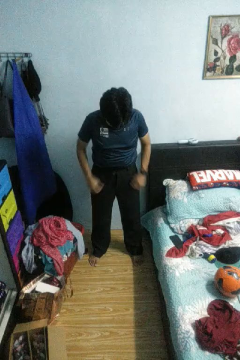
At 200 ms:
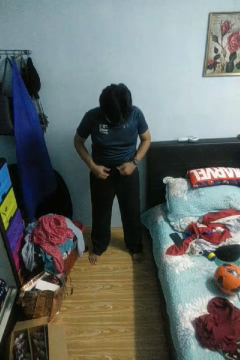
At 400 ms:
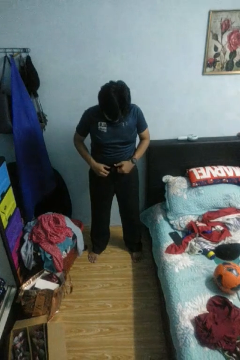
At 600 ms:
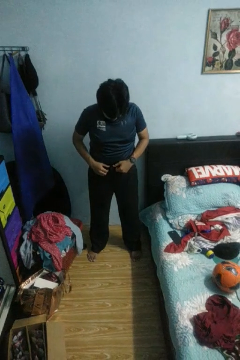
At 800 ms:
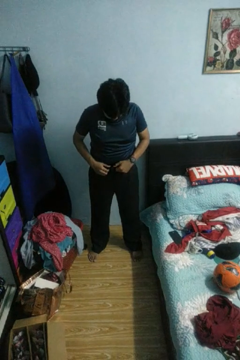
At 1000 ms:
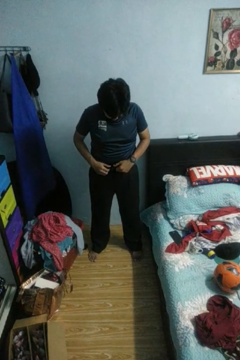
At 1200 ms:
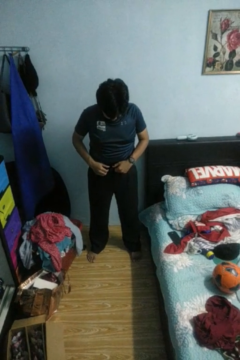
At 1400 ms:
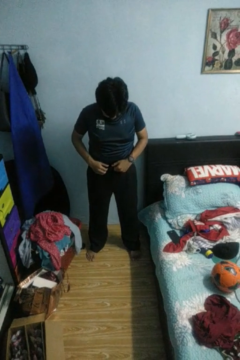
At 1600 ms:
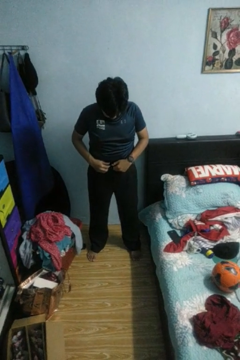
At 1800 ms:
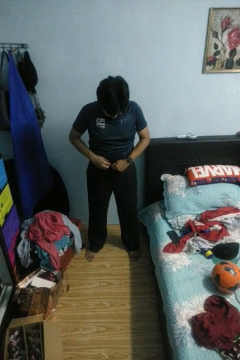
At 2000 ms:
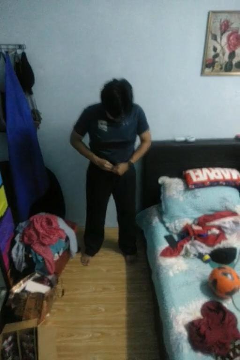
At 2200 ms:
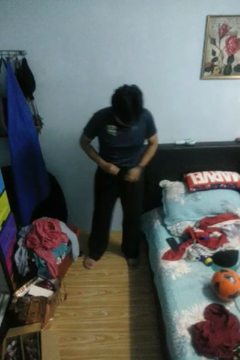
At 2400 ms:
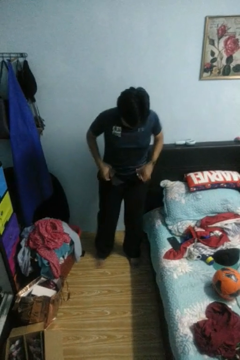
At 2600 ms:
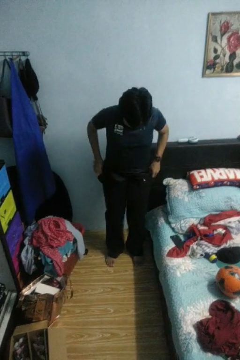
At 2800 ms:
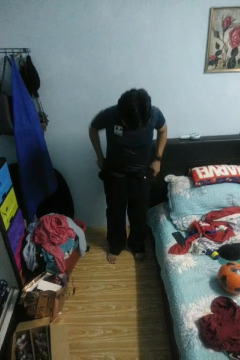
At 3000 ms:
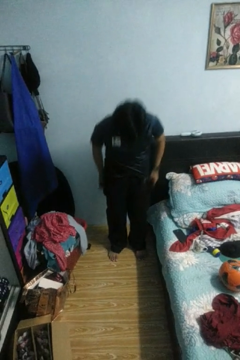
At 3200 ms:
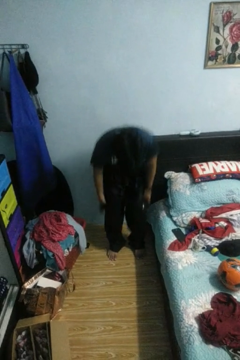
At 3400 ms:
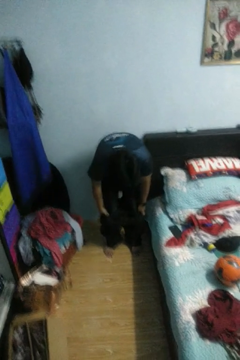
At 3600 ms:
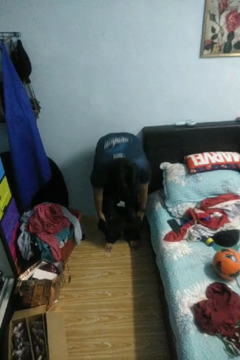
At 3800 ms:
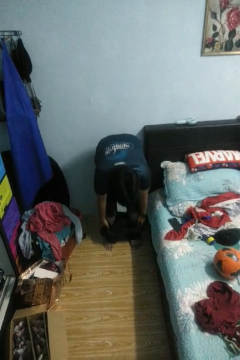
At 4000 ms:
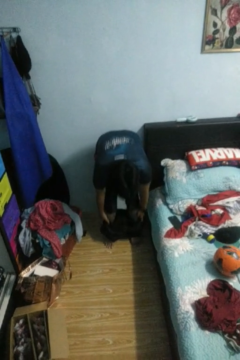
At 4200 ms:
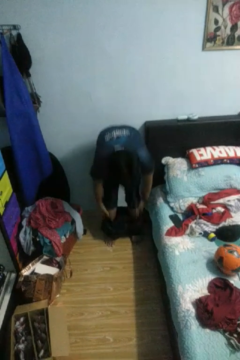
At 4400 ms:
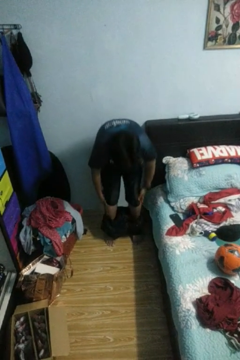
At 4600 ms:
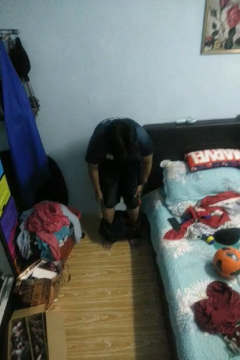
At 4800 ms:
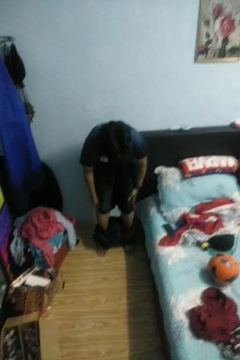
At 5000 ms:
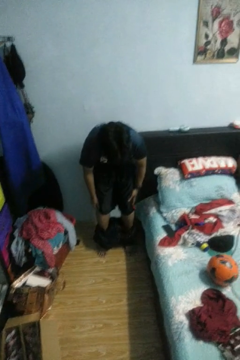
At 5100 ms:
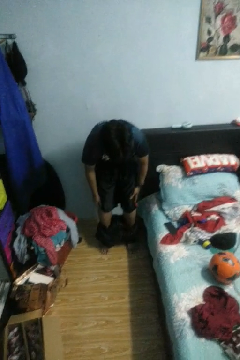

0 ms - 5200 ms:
person takes off pants

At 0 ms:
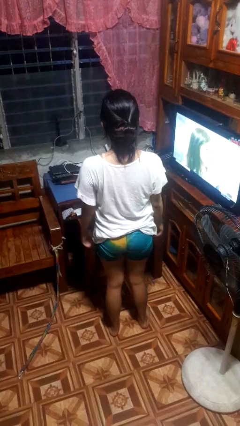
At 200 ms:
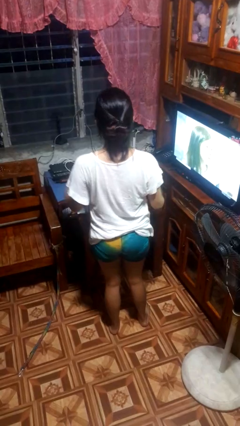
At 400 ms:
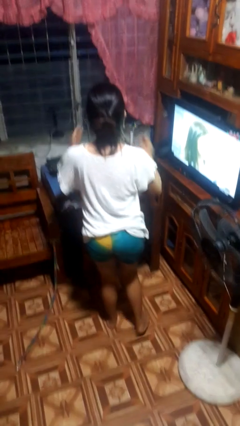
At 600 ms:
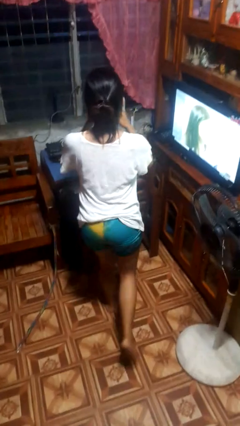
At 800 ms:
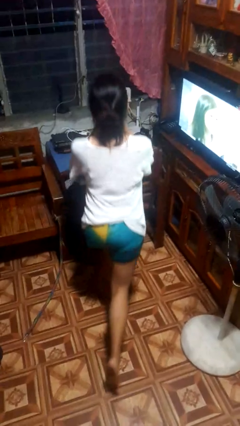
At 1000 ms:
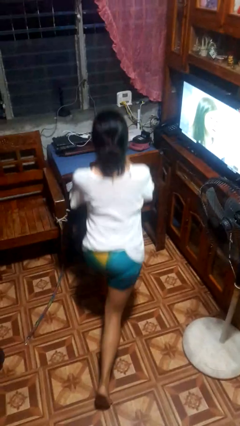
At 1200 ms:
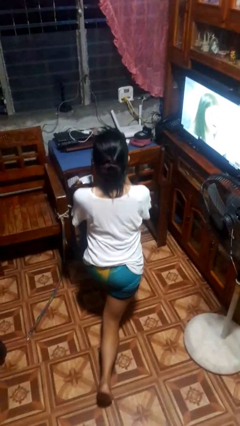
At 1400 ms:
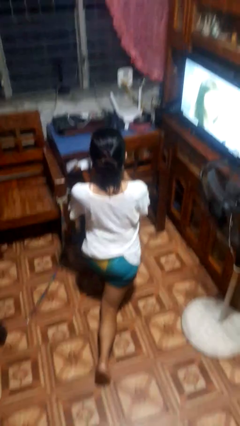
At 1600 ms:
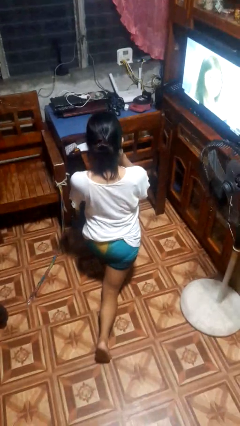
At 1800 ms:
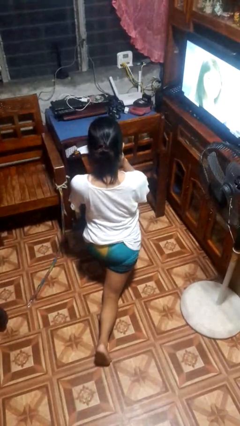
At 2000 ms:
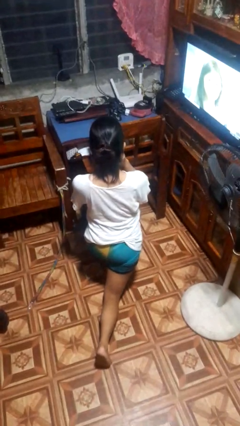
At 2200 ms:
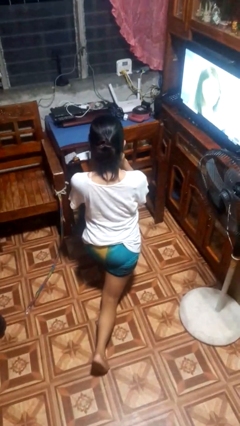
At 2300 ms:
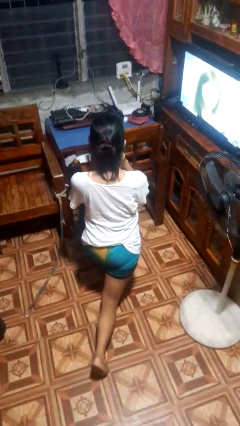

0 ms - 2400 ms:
person exercises with lunges

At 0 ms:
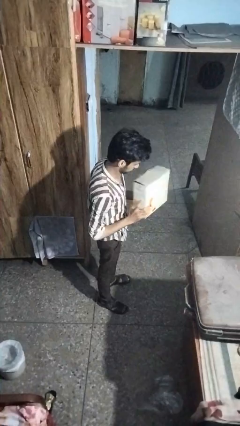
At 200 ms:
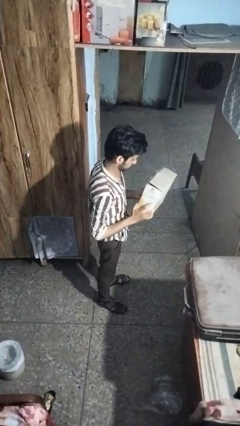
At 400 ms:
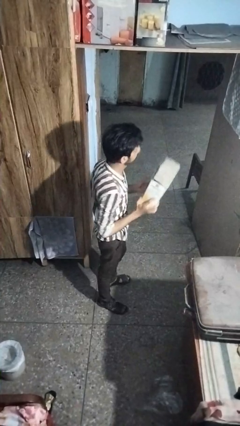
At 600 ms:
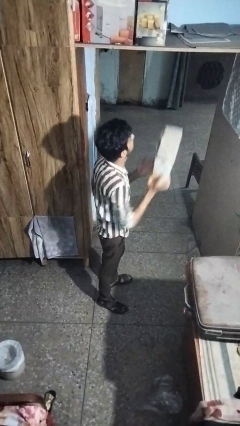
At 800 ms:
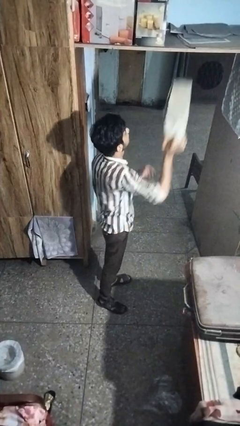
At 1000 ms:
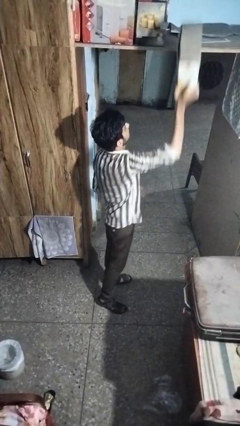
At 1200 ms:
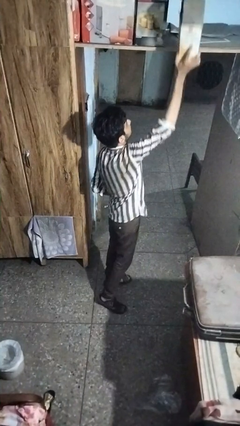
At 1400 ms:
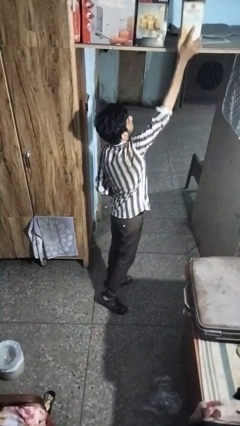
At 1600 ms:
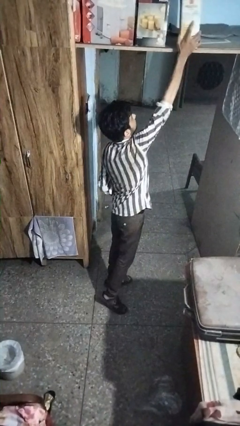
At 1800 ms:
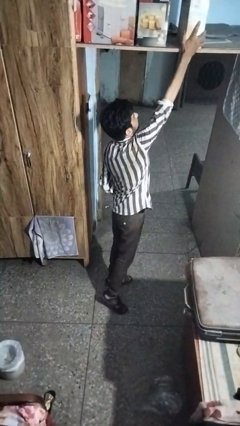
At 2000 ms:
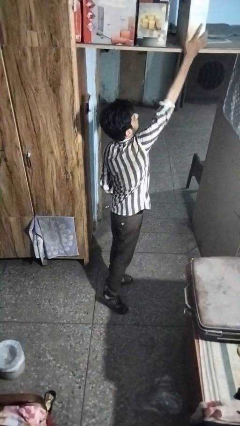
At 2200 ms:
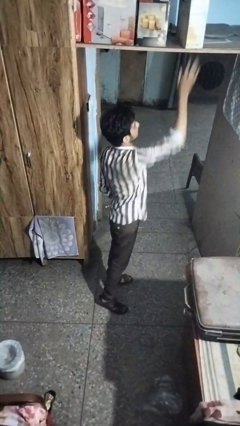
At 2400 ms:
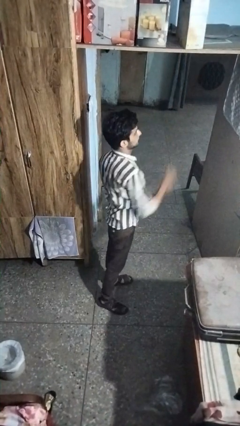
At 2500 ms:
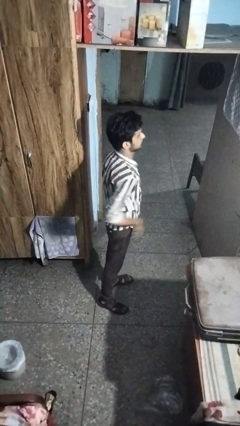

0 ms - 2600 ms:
person puts down object on shelf

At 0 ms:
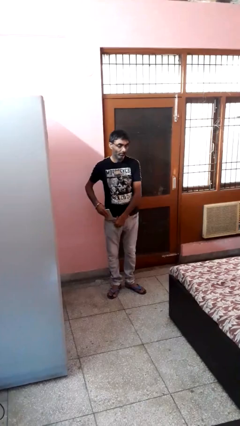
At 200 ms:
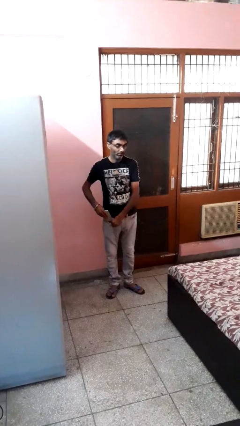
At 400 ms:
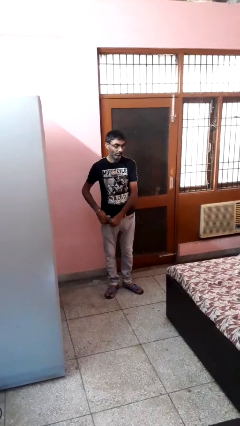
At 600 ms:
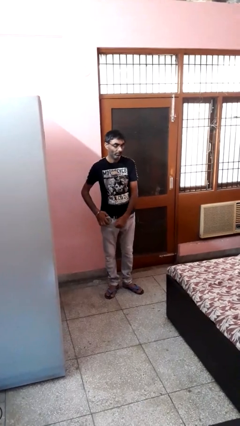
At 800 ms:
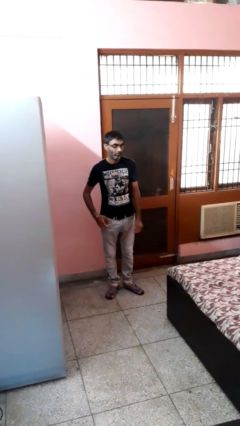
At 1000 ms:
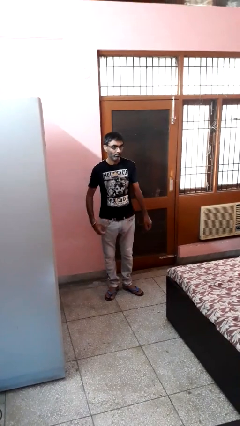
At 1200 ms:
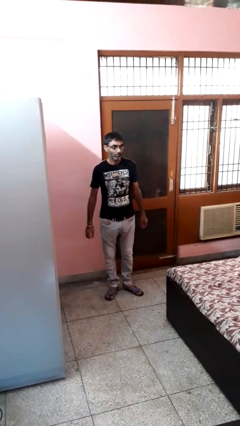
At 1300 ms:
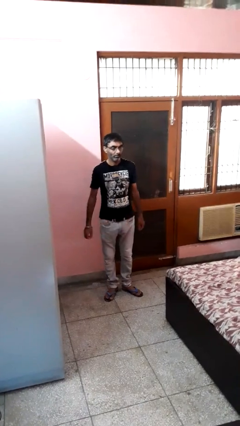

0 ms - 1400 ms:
person puts phone into pocket

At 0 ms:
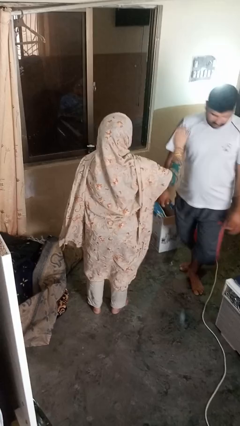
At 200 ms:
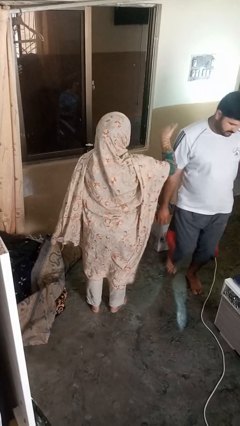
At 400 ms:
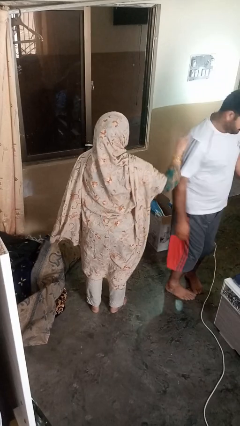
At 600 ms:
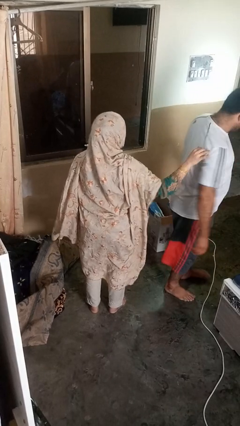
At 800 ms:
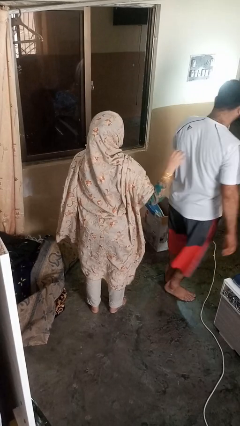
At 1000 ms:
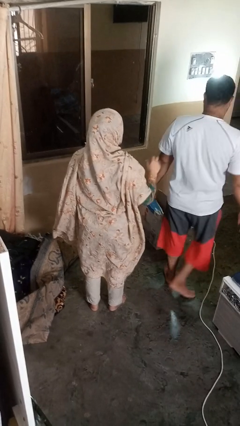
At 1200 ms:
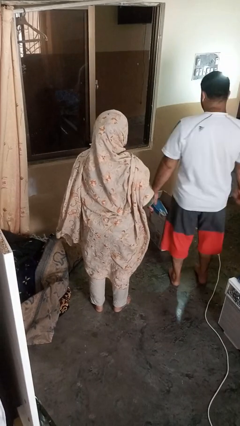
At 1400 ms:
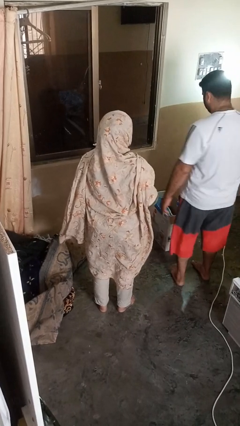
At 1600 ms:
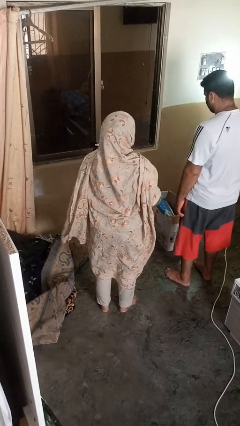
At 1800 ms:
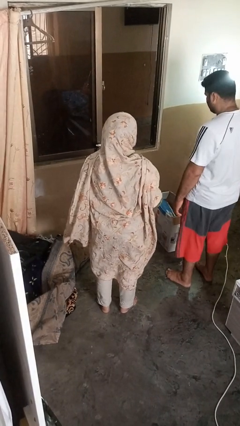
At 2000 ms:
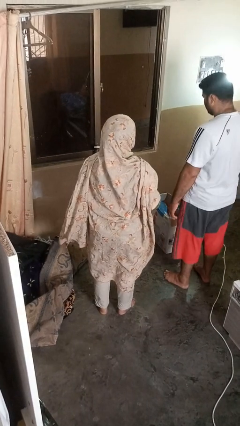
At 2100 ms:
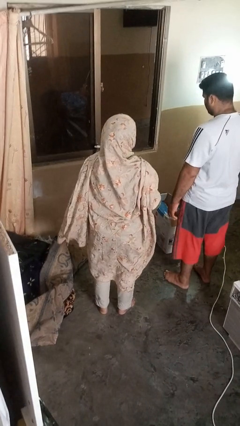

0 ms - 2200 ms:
person spins person around

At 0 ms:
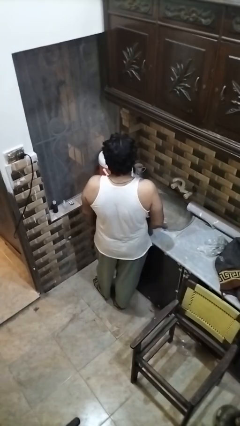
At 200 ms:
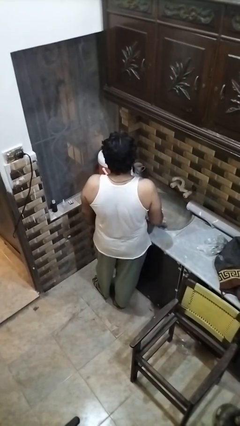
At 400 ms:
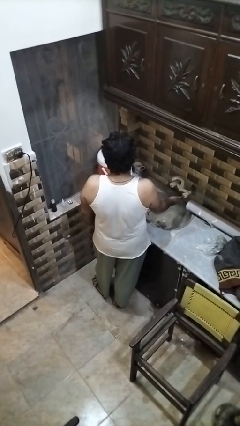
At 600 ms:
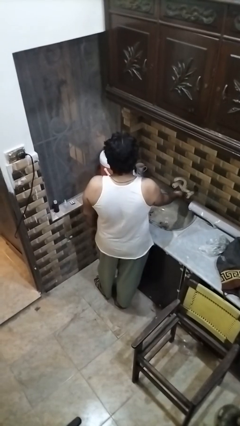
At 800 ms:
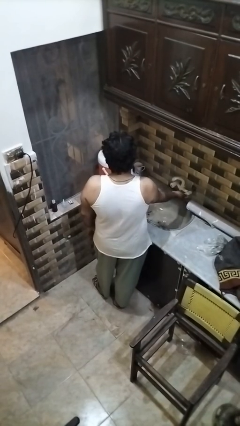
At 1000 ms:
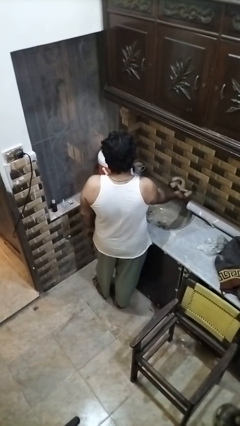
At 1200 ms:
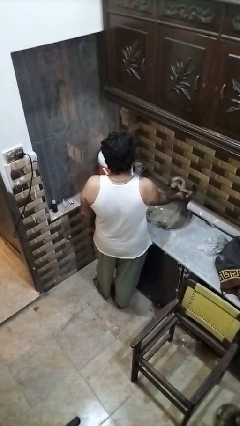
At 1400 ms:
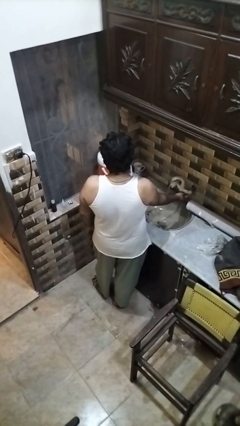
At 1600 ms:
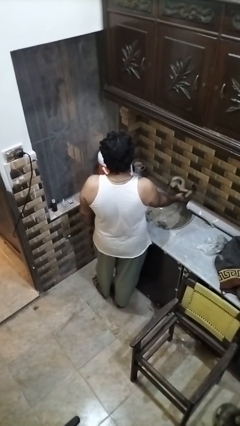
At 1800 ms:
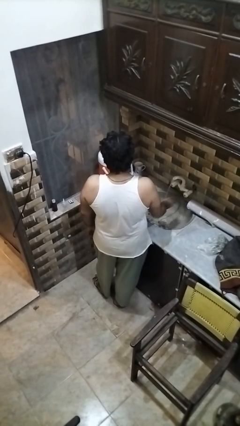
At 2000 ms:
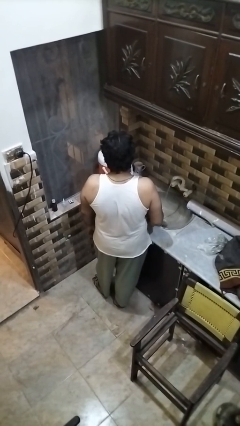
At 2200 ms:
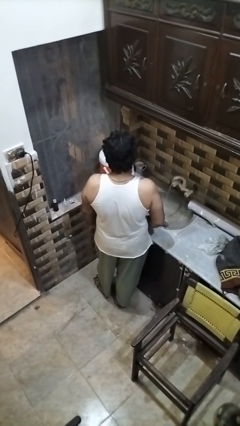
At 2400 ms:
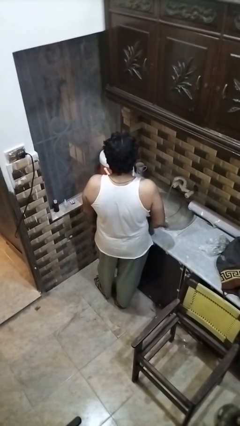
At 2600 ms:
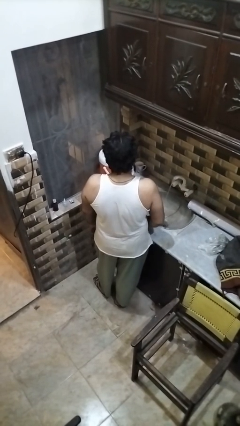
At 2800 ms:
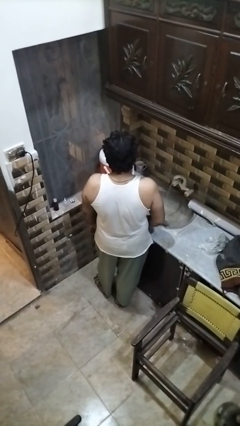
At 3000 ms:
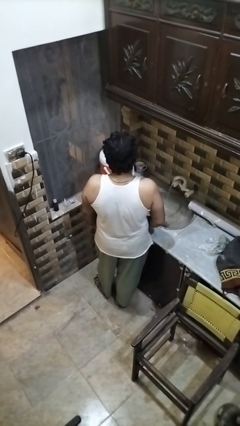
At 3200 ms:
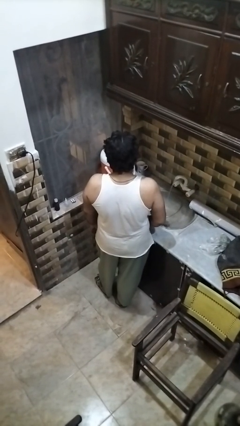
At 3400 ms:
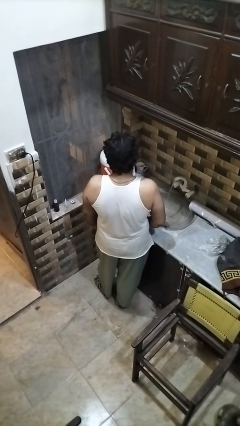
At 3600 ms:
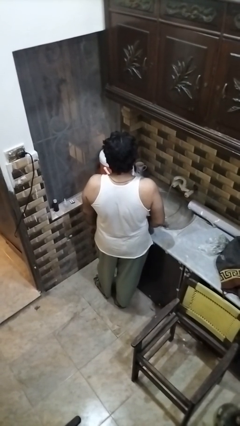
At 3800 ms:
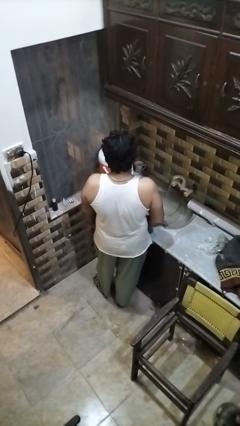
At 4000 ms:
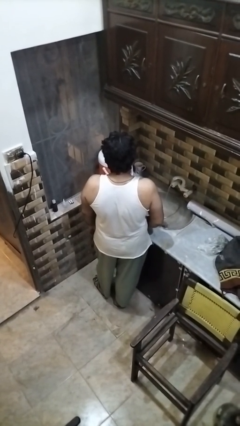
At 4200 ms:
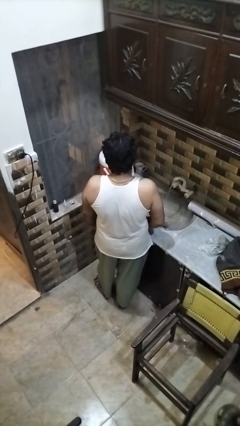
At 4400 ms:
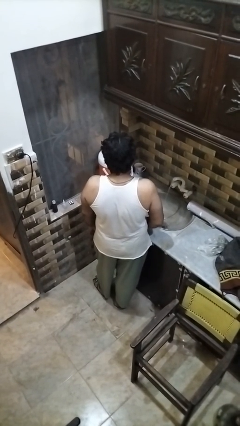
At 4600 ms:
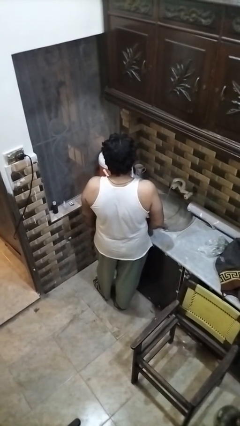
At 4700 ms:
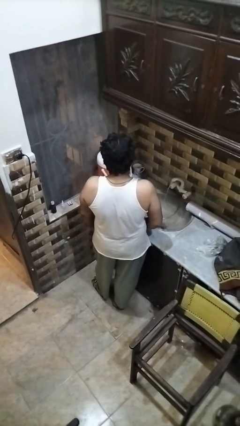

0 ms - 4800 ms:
person turns on faucet
